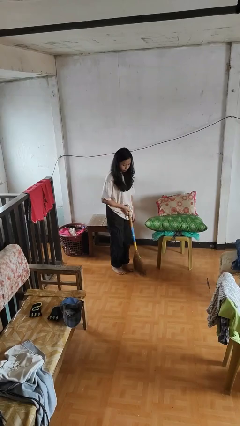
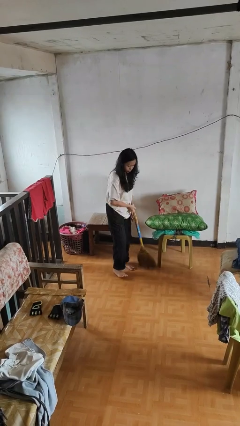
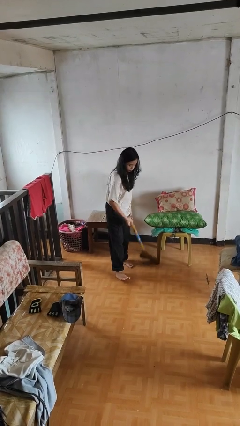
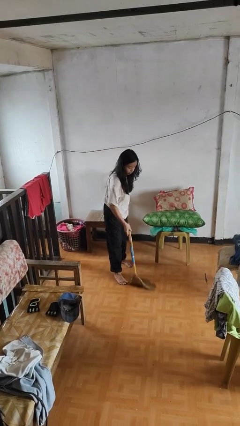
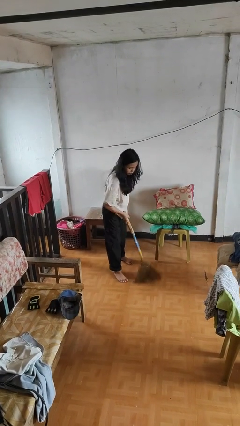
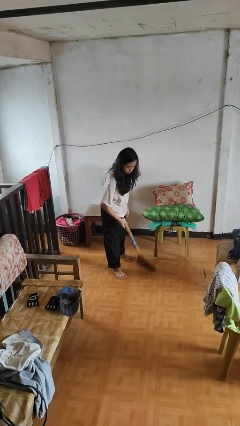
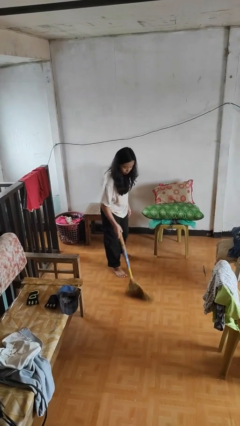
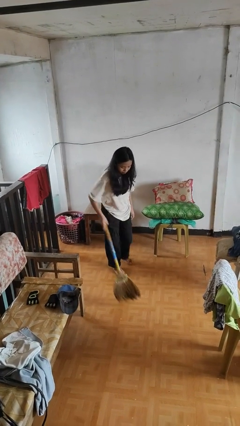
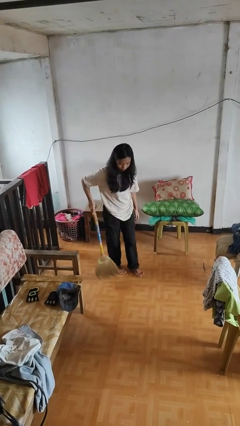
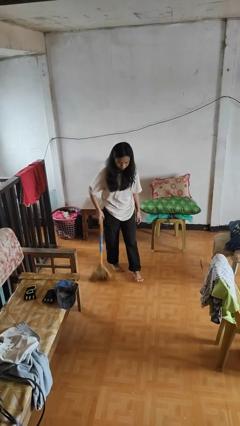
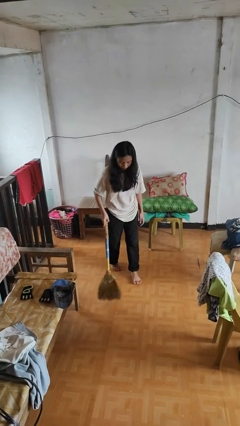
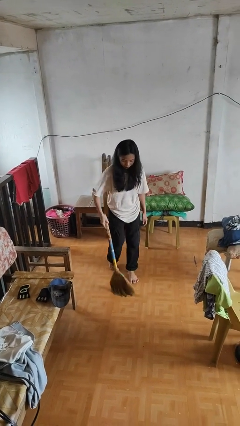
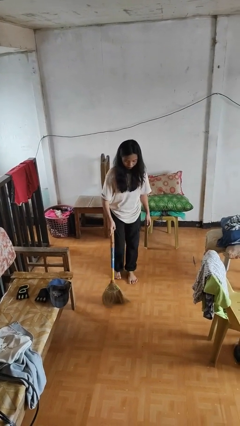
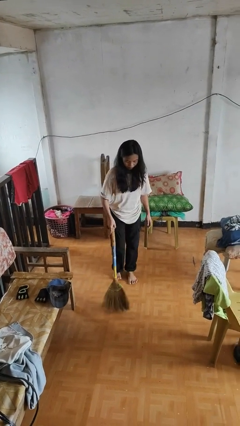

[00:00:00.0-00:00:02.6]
person sweeps floor

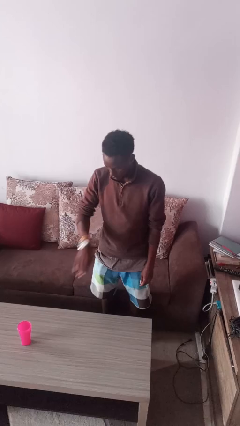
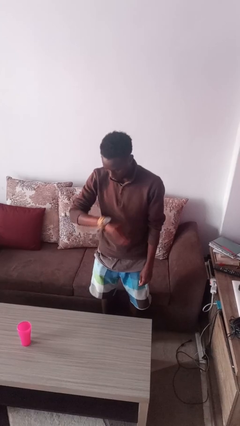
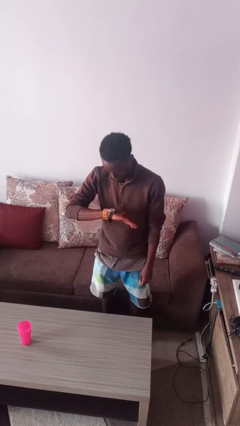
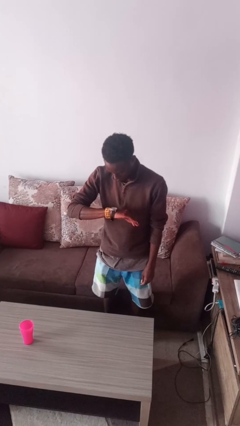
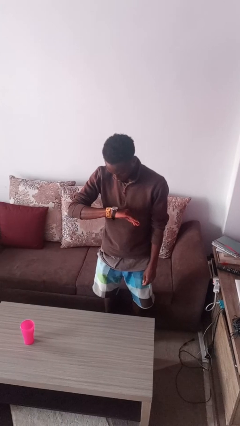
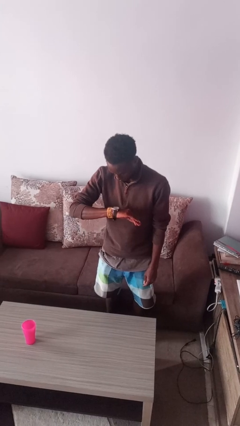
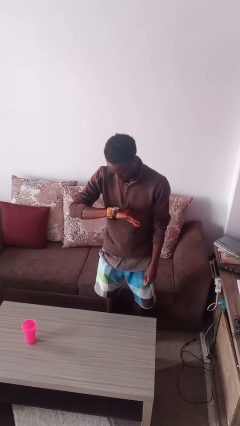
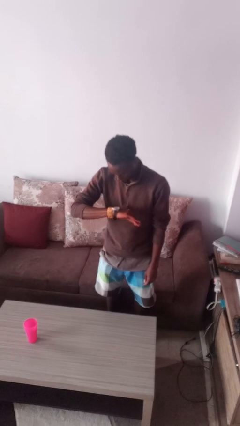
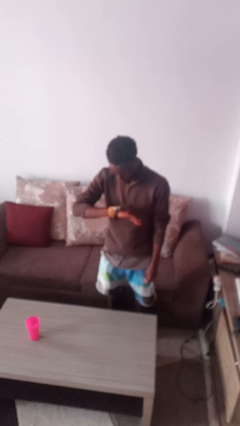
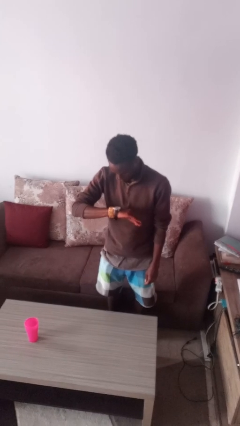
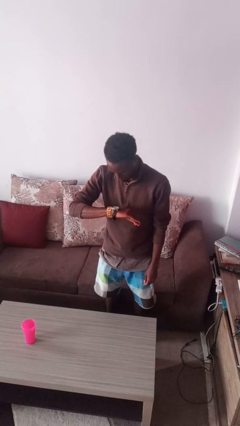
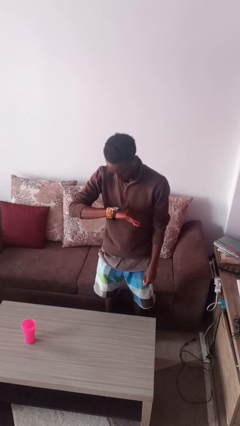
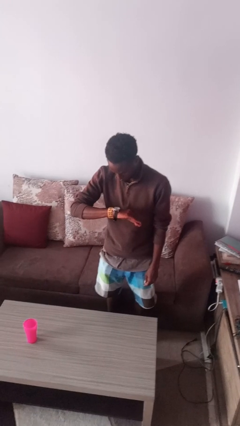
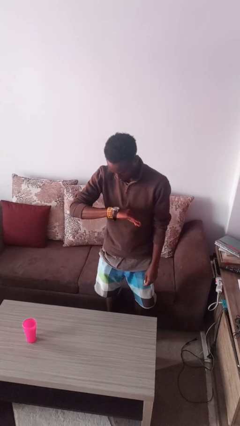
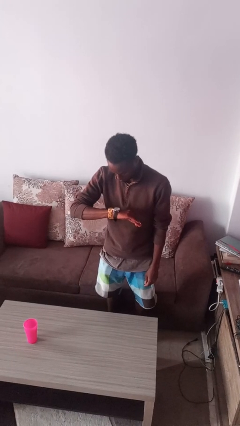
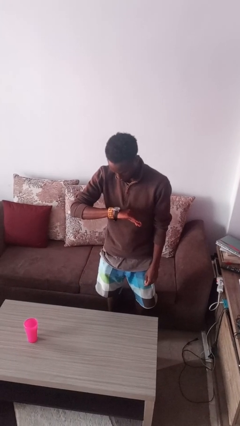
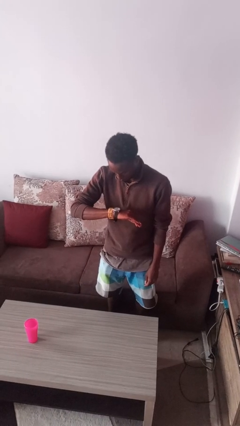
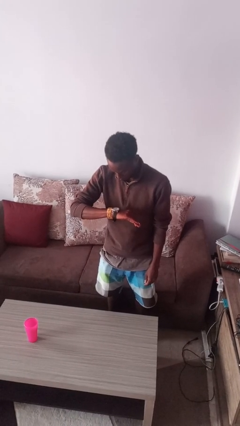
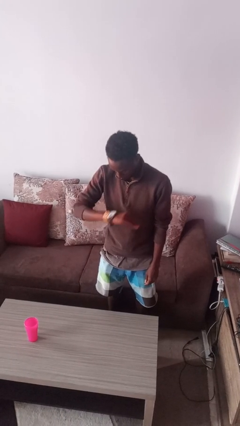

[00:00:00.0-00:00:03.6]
person looks at wristwatch

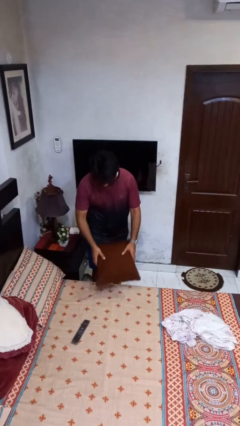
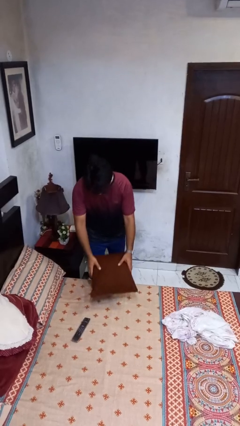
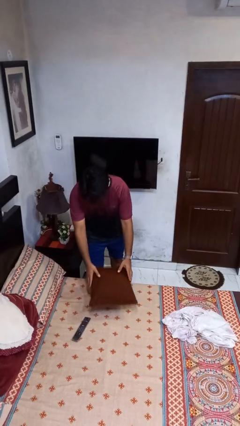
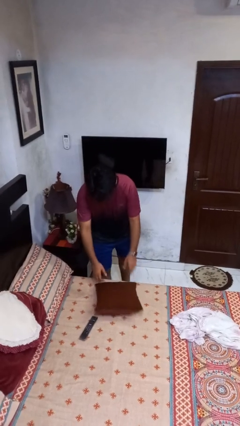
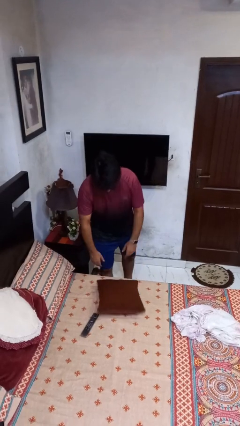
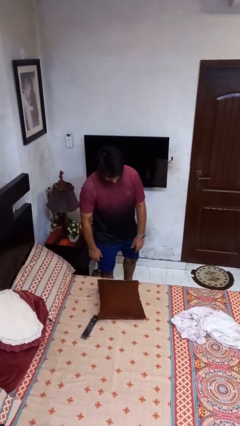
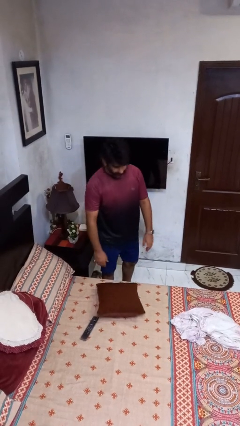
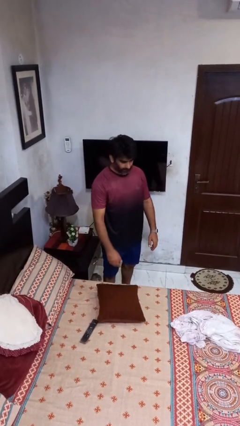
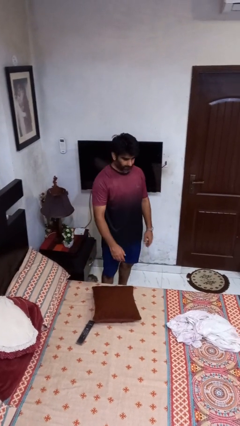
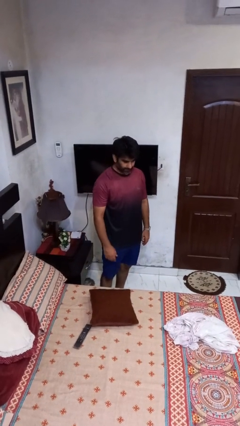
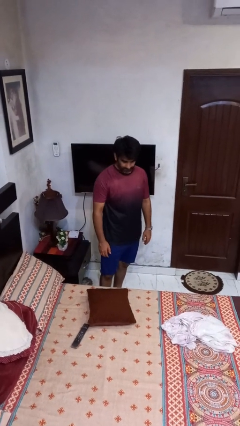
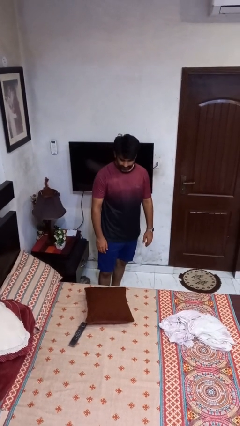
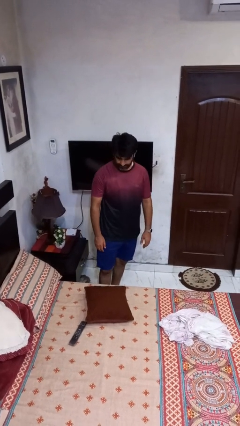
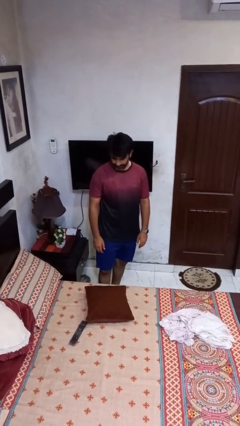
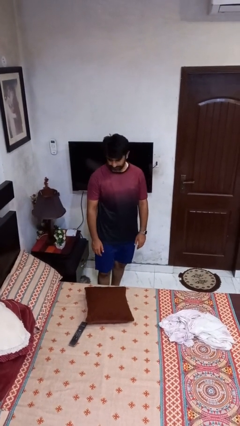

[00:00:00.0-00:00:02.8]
person puts down object on bed

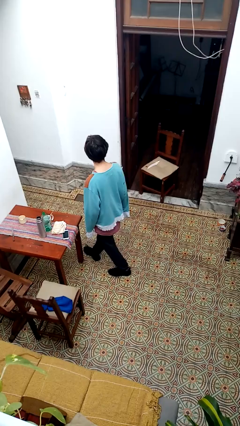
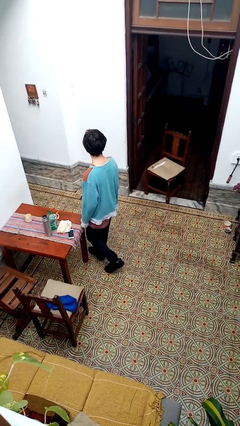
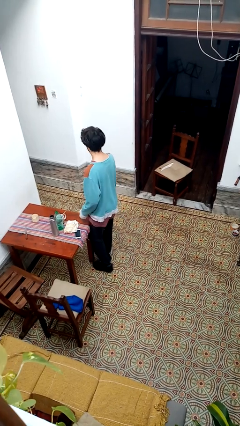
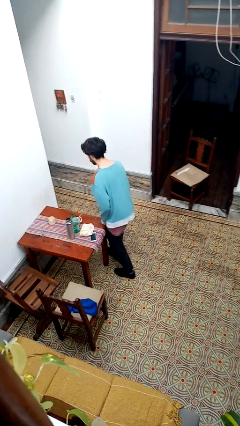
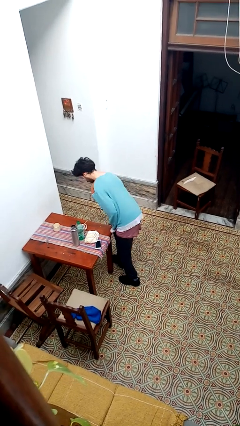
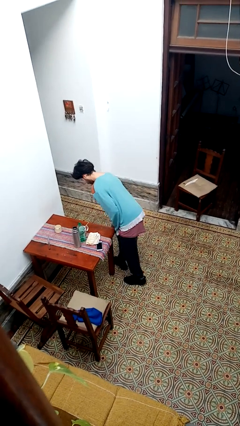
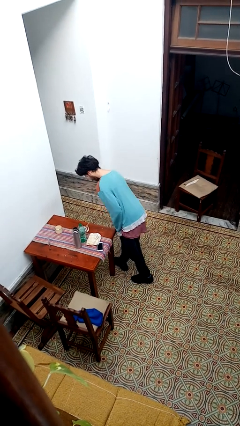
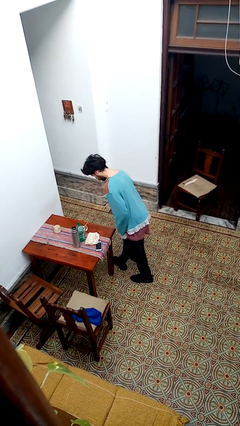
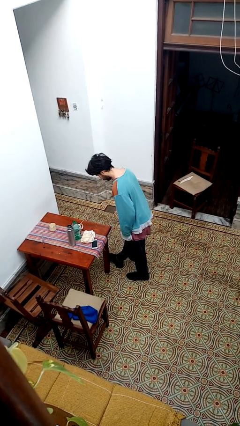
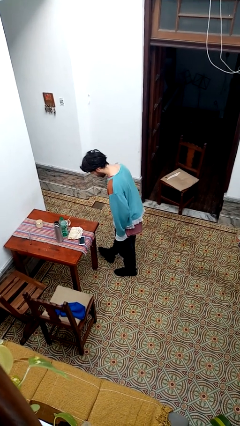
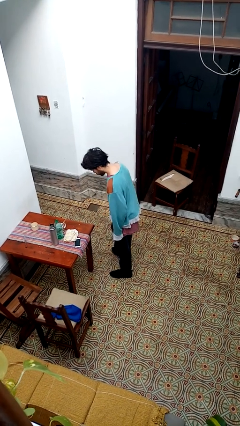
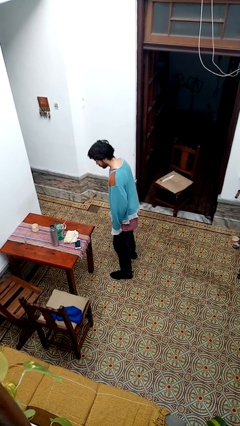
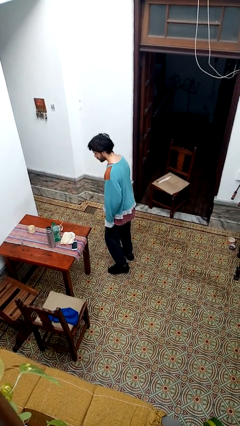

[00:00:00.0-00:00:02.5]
person bumps into table

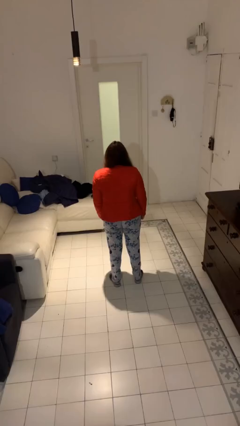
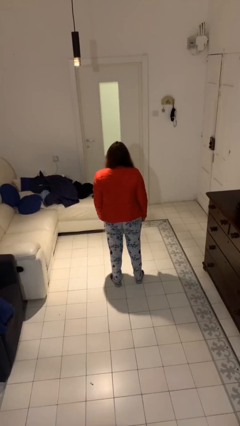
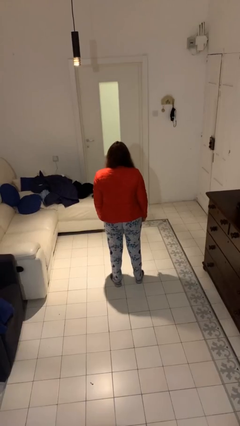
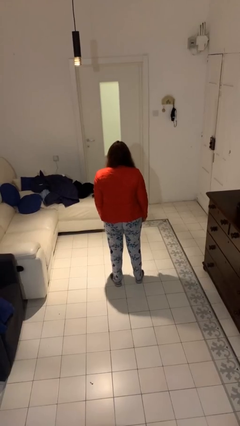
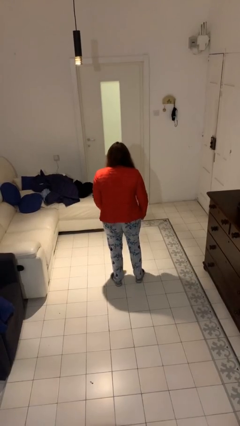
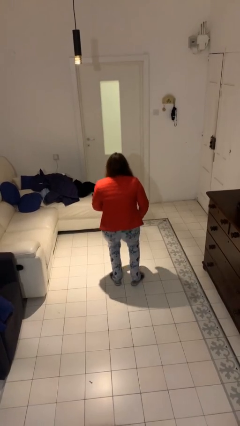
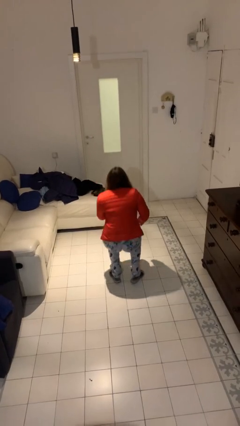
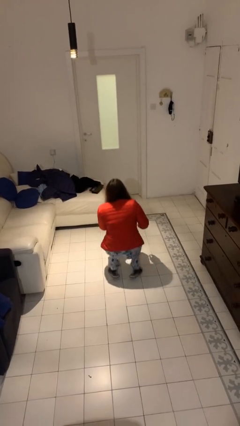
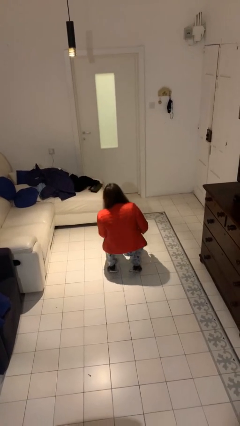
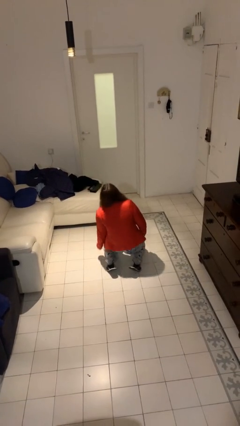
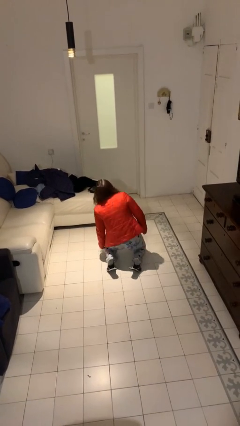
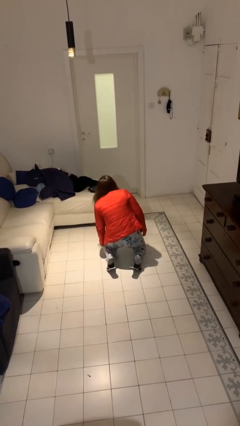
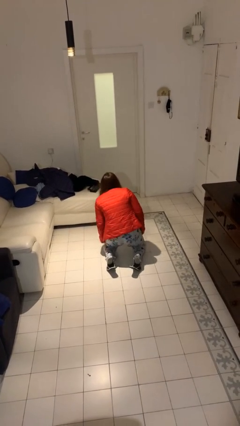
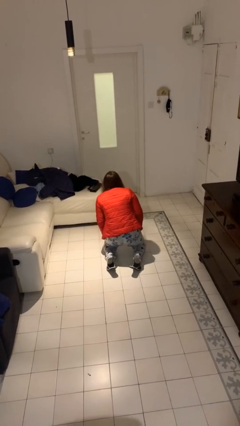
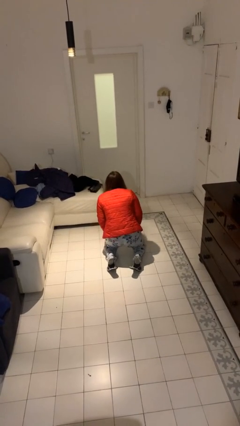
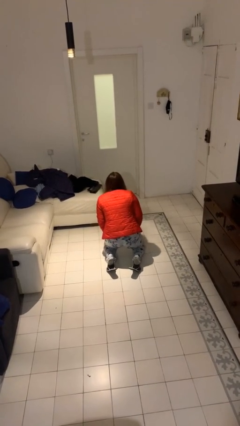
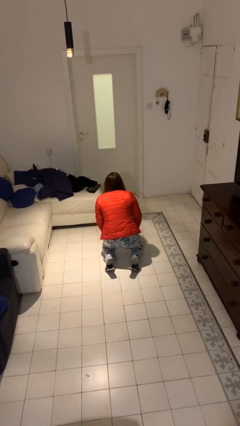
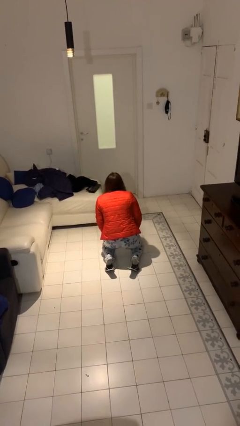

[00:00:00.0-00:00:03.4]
person falls while standing

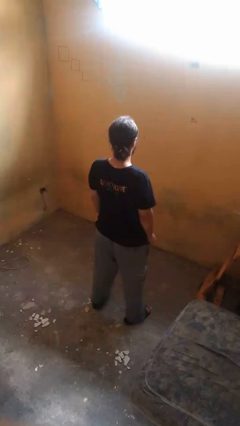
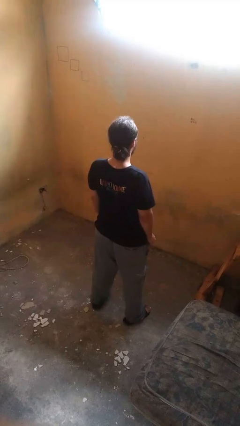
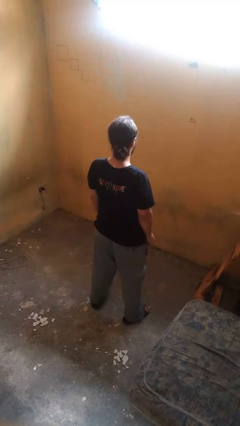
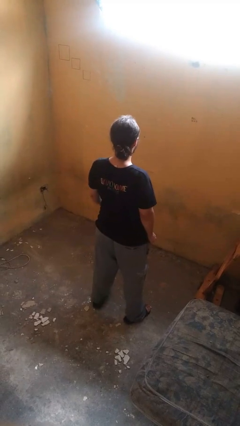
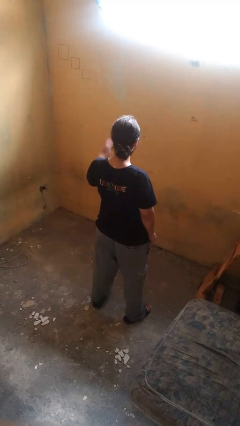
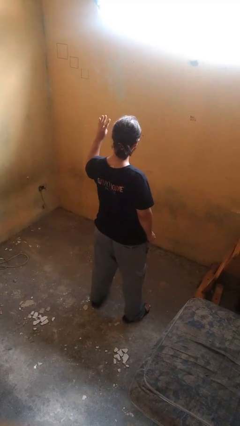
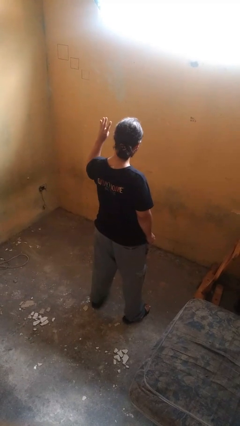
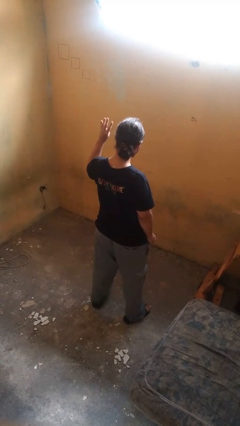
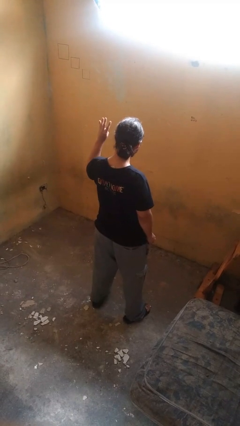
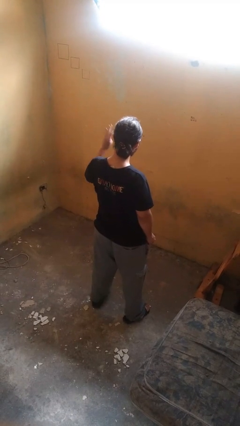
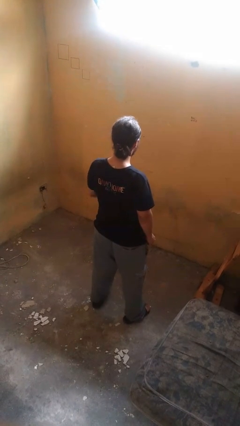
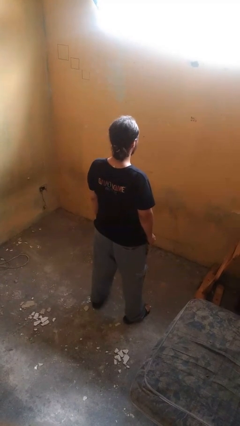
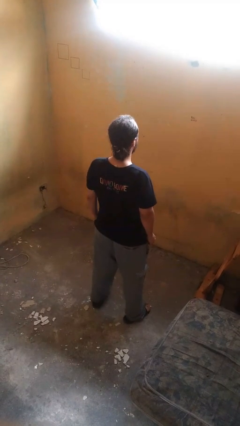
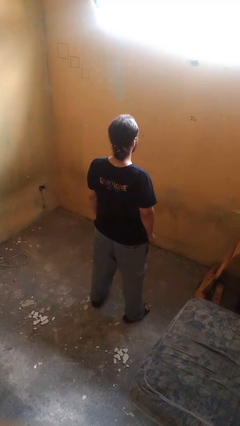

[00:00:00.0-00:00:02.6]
person gestures number four
